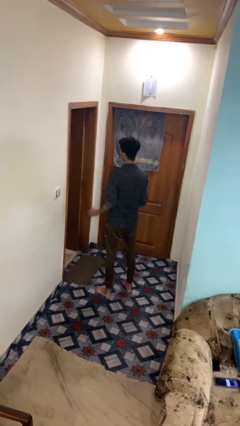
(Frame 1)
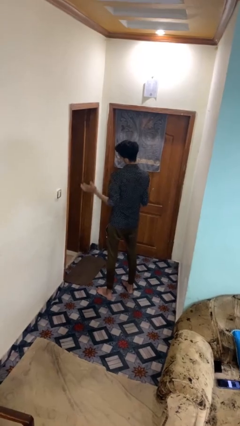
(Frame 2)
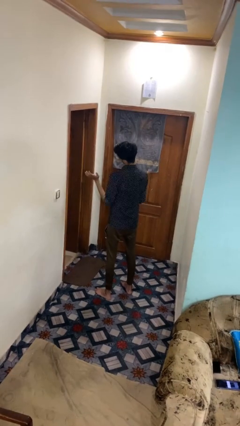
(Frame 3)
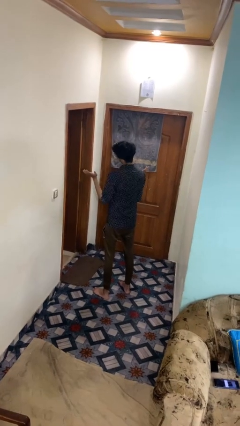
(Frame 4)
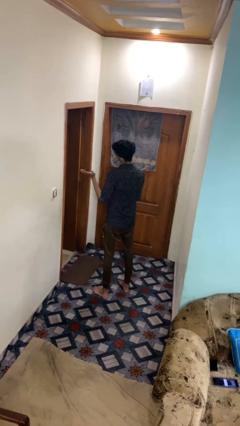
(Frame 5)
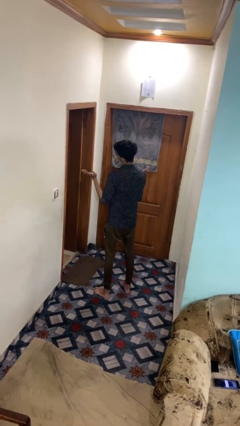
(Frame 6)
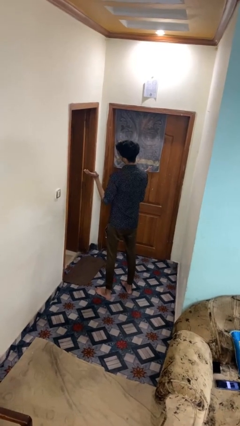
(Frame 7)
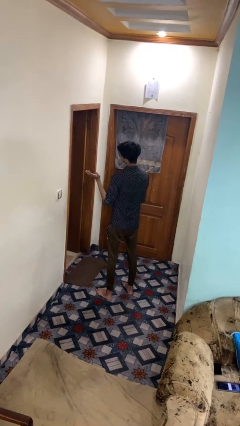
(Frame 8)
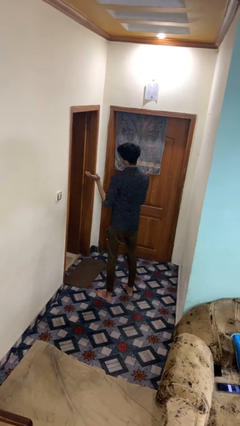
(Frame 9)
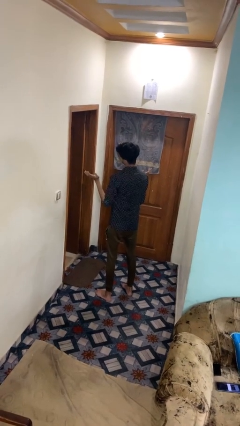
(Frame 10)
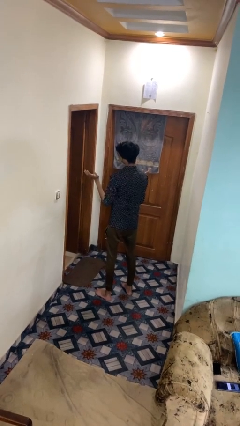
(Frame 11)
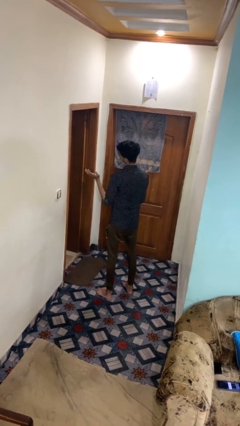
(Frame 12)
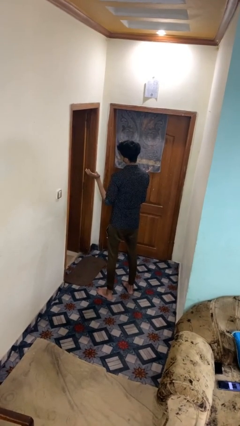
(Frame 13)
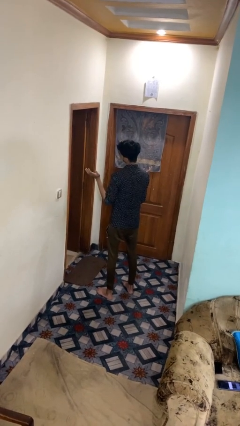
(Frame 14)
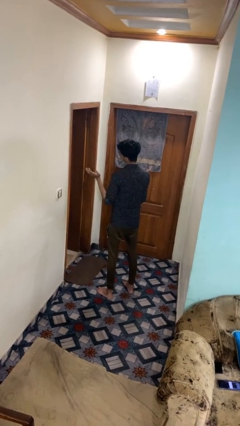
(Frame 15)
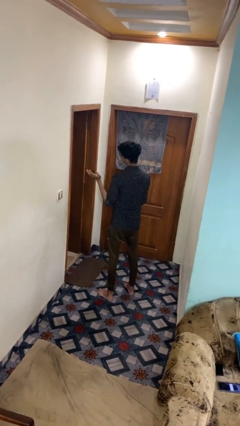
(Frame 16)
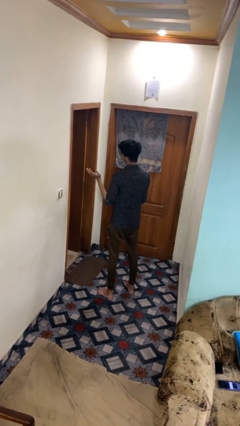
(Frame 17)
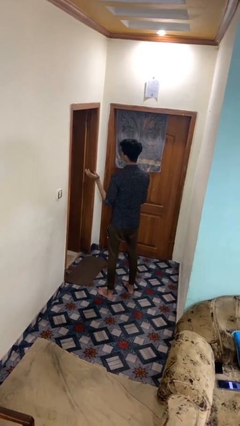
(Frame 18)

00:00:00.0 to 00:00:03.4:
person shrugs

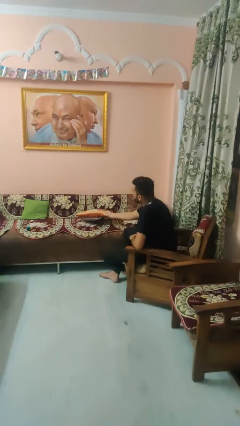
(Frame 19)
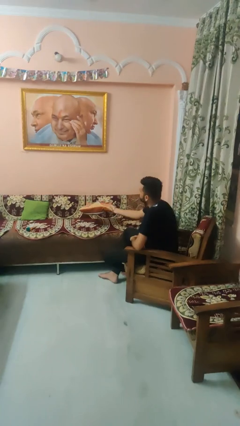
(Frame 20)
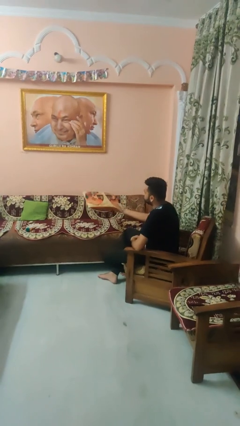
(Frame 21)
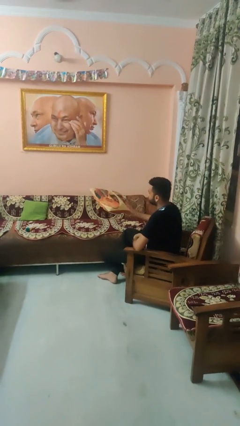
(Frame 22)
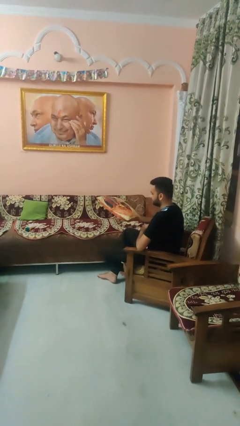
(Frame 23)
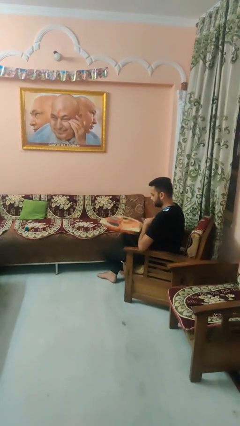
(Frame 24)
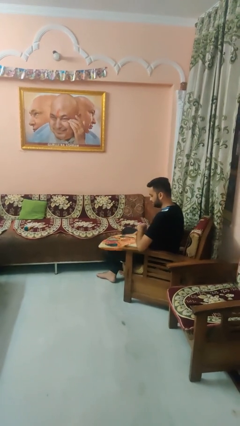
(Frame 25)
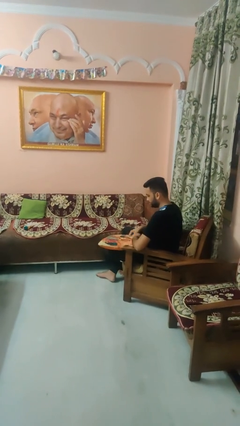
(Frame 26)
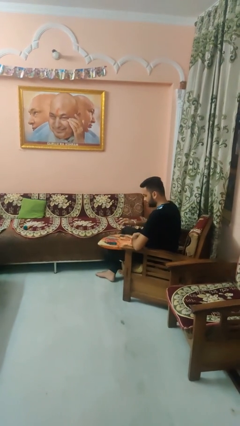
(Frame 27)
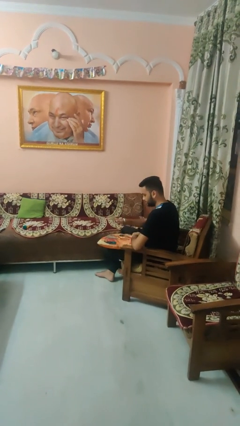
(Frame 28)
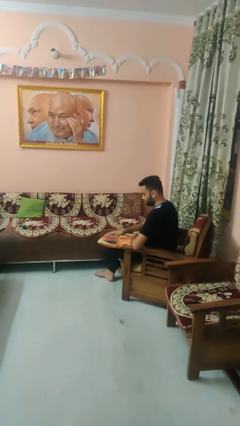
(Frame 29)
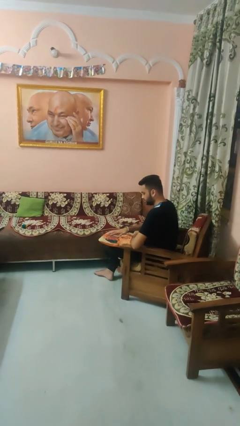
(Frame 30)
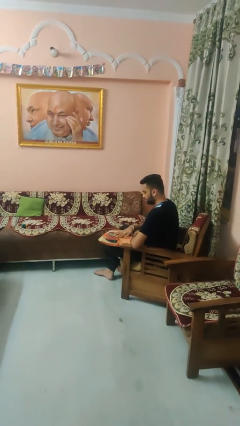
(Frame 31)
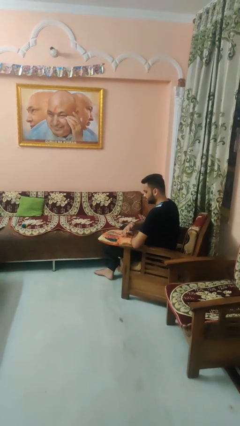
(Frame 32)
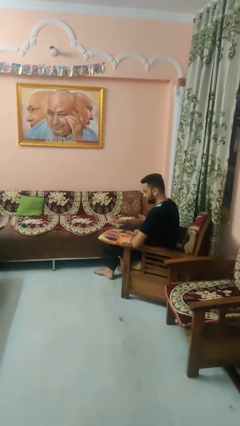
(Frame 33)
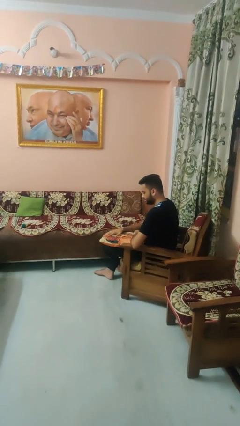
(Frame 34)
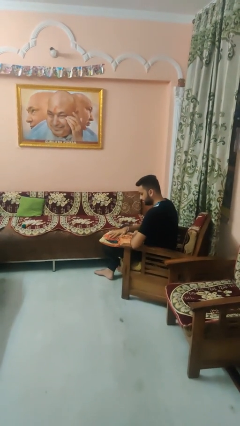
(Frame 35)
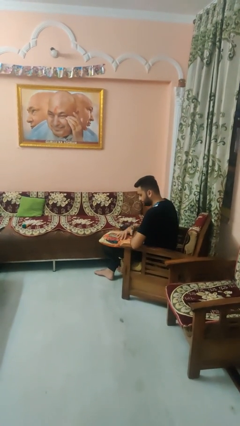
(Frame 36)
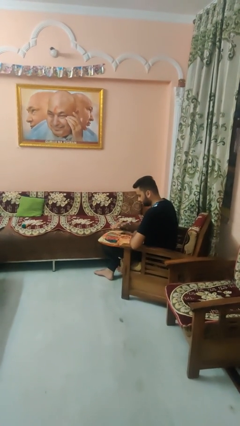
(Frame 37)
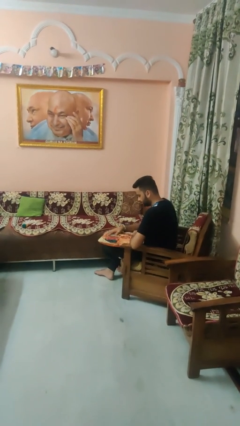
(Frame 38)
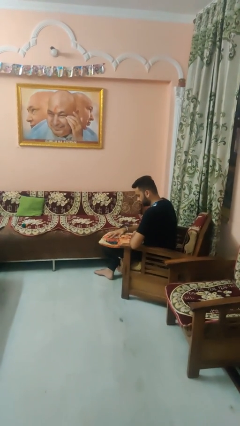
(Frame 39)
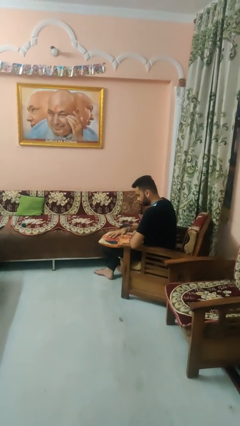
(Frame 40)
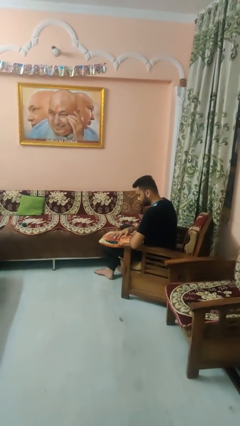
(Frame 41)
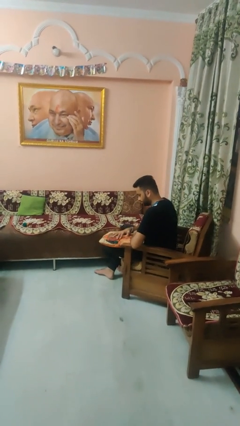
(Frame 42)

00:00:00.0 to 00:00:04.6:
person waves hand over object

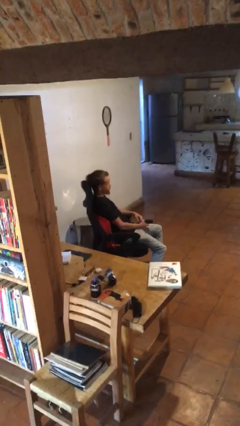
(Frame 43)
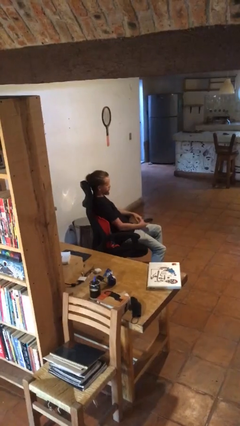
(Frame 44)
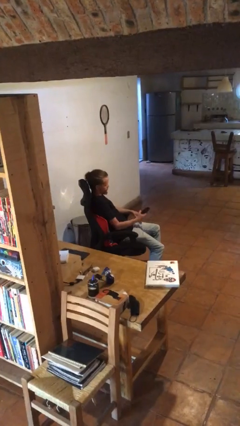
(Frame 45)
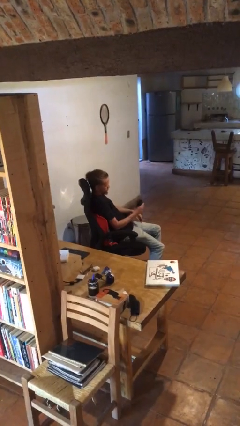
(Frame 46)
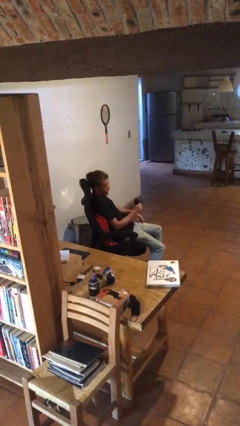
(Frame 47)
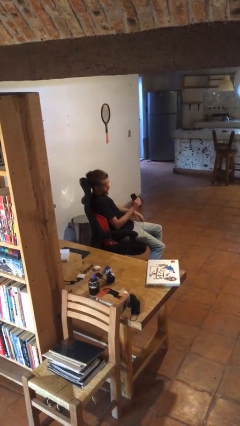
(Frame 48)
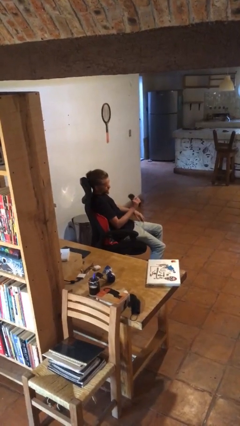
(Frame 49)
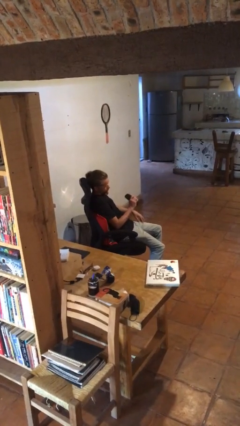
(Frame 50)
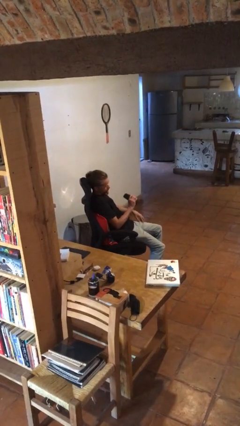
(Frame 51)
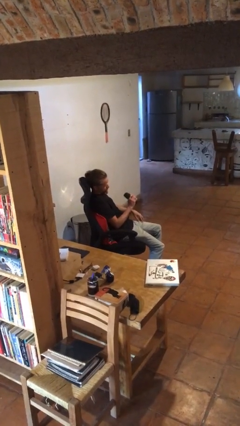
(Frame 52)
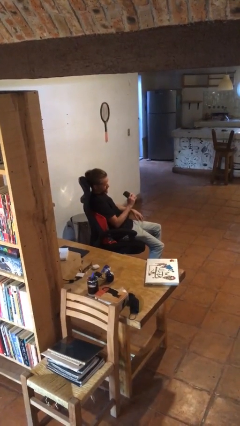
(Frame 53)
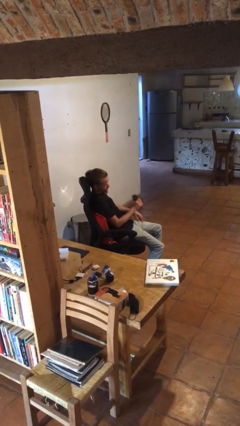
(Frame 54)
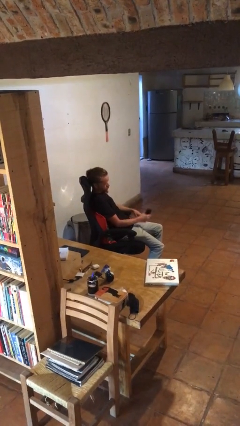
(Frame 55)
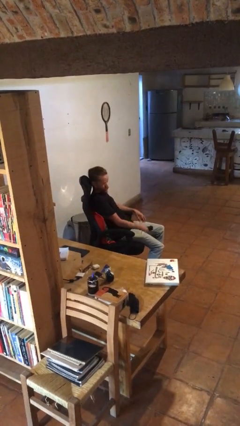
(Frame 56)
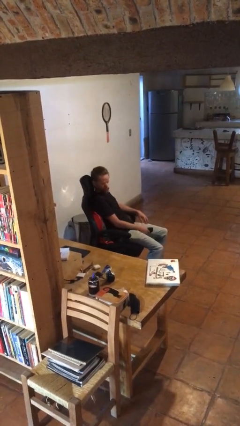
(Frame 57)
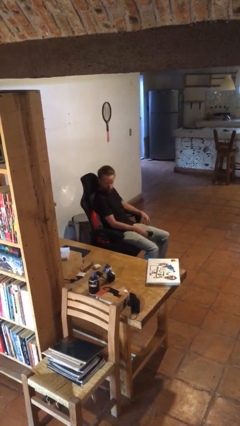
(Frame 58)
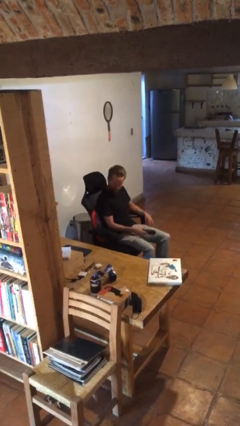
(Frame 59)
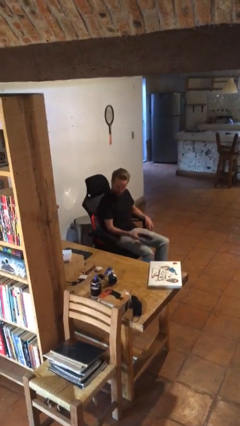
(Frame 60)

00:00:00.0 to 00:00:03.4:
person squeezes object

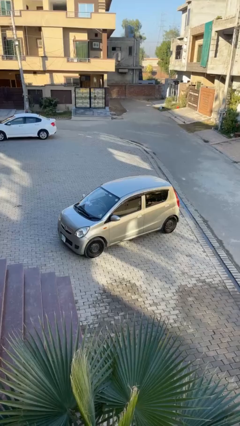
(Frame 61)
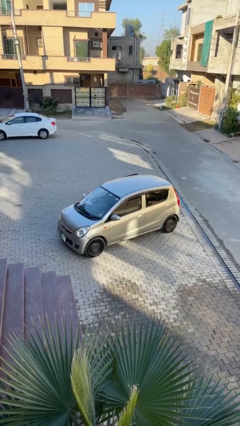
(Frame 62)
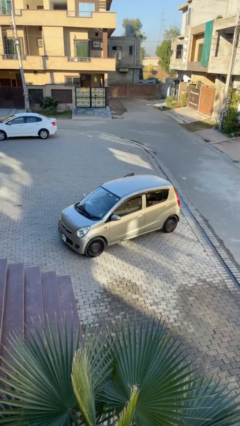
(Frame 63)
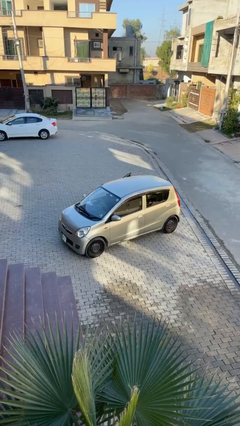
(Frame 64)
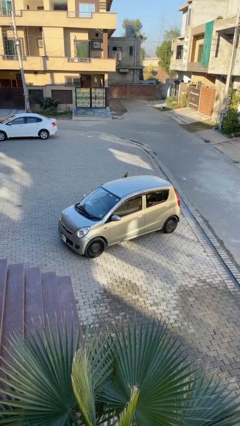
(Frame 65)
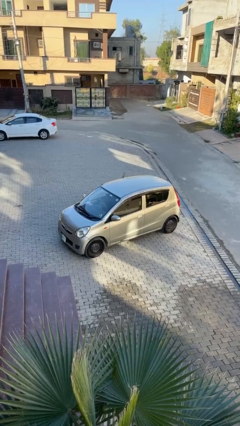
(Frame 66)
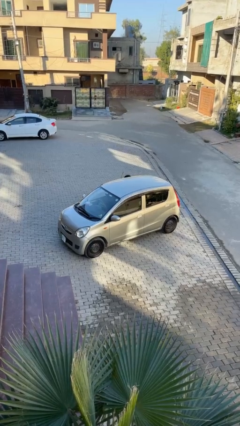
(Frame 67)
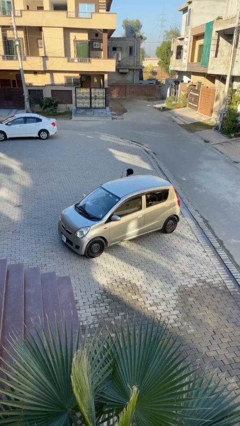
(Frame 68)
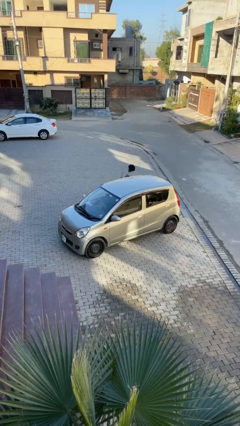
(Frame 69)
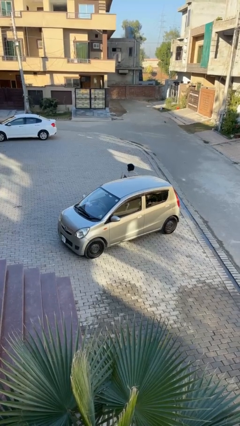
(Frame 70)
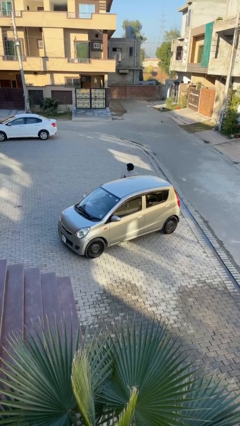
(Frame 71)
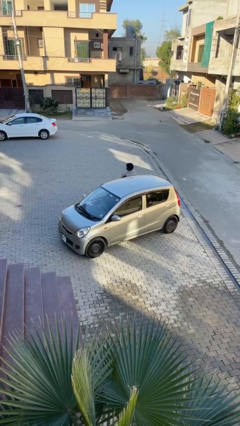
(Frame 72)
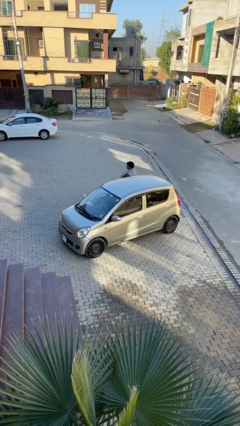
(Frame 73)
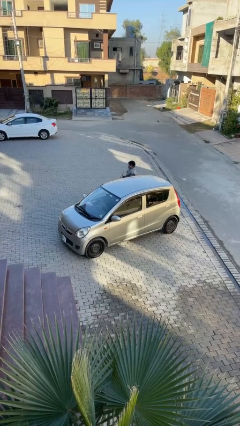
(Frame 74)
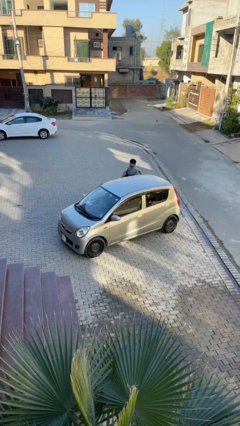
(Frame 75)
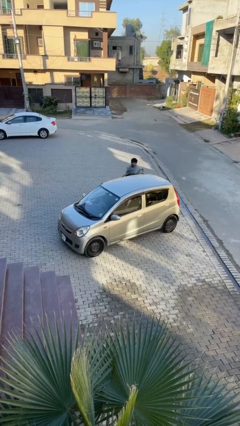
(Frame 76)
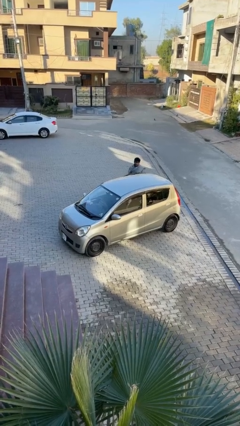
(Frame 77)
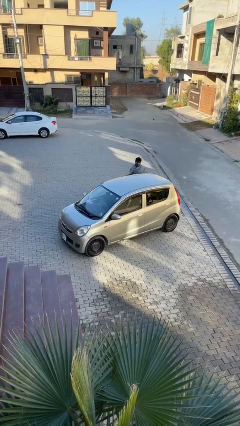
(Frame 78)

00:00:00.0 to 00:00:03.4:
car drops off person

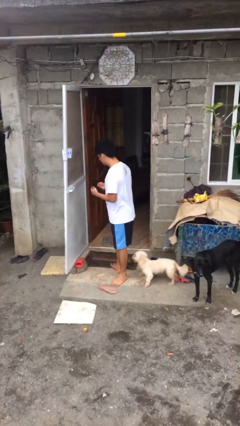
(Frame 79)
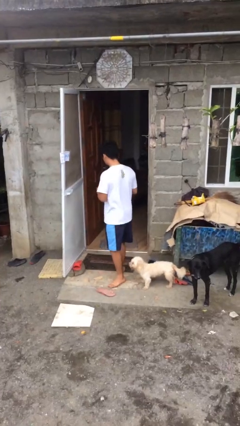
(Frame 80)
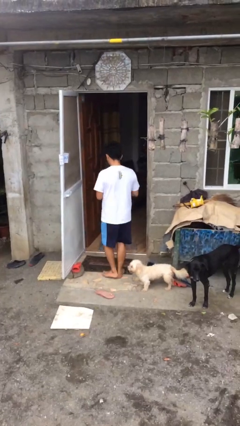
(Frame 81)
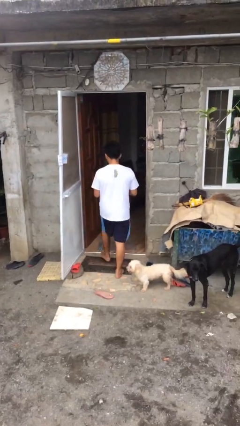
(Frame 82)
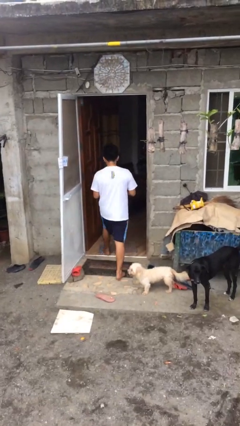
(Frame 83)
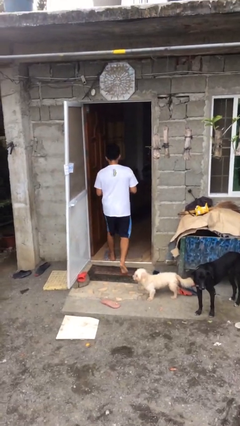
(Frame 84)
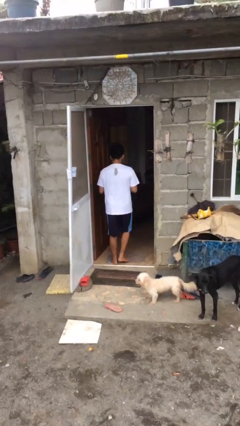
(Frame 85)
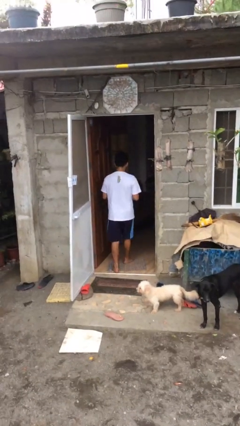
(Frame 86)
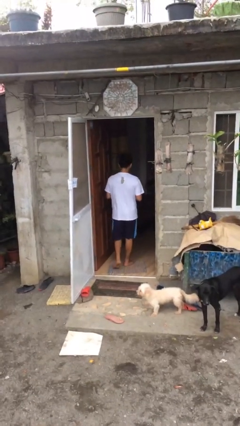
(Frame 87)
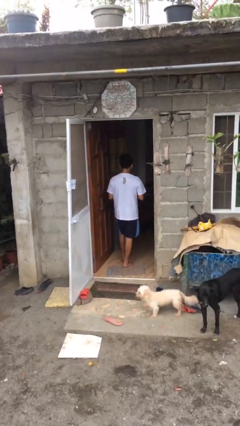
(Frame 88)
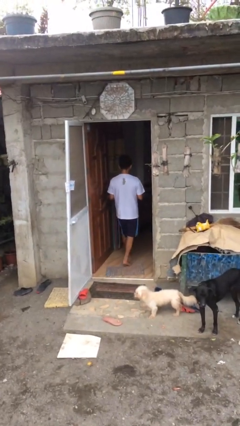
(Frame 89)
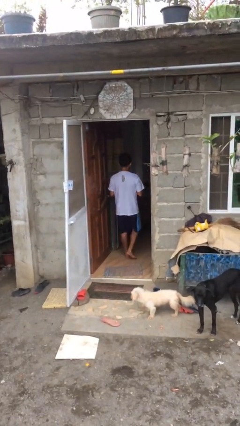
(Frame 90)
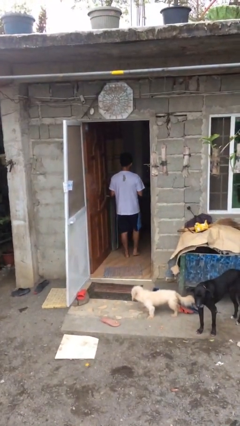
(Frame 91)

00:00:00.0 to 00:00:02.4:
person exits scene through structure

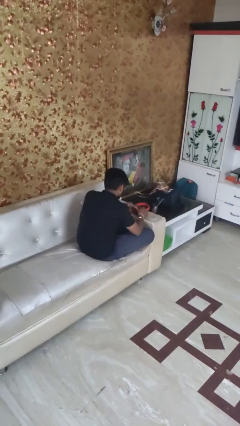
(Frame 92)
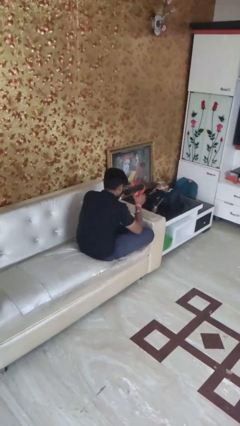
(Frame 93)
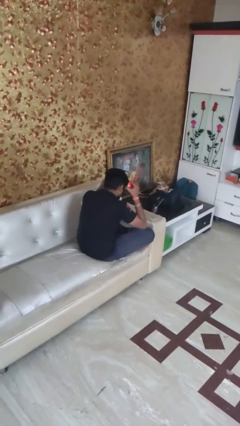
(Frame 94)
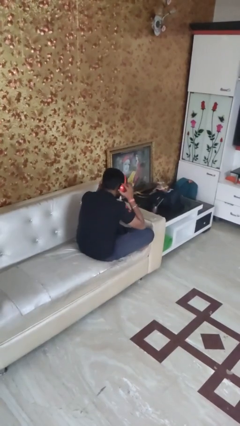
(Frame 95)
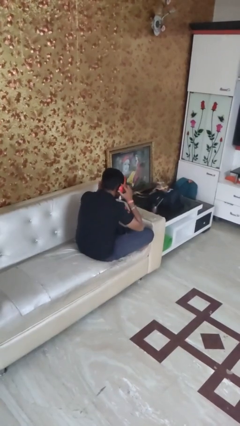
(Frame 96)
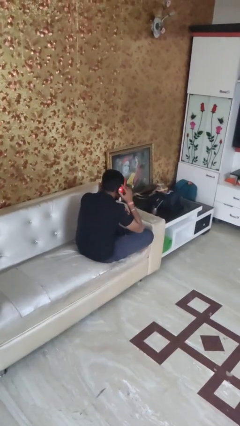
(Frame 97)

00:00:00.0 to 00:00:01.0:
person puts on headphones
